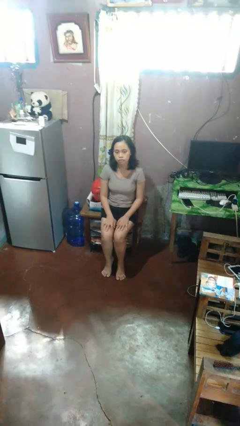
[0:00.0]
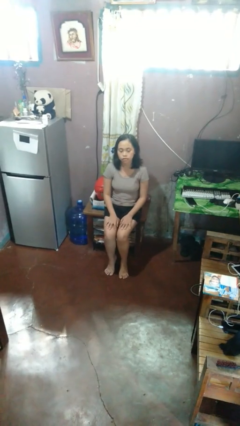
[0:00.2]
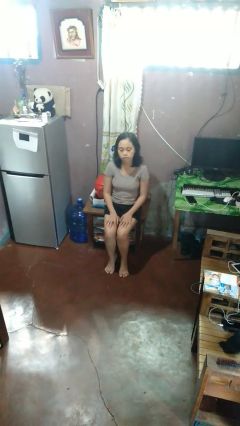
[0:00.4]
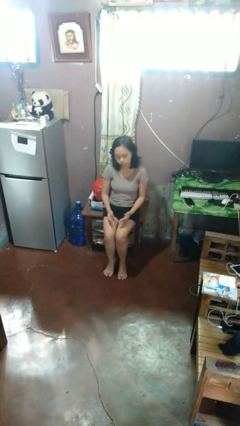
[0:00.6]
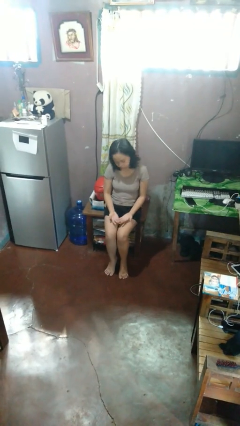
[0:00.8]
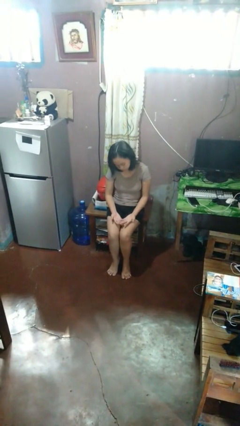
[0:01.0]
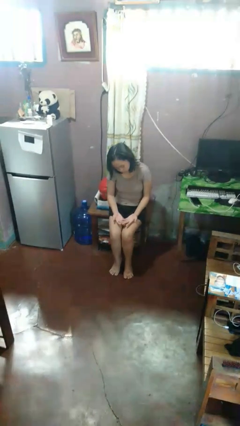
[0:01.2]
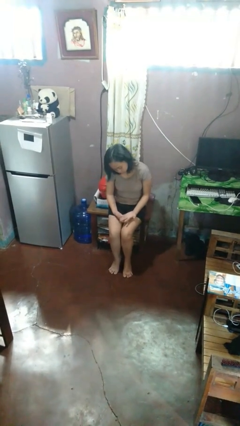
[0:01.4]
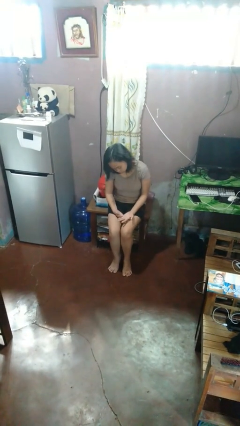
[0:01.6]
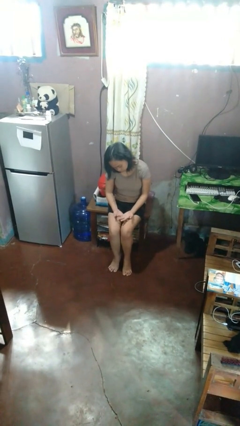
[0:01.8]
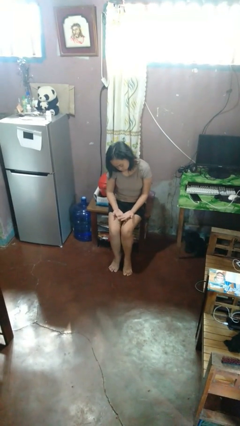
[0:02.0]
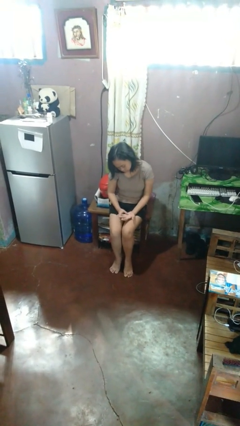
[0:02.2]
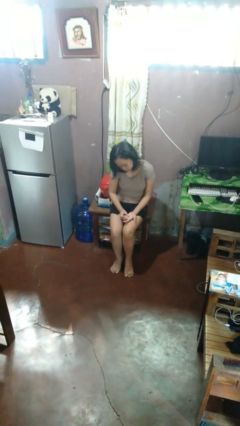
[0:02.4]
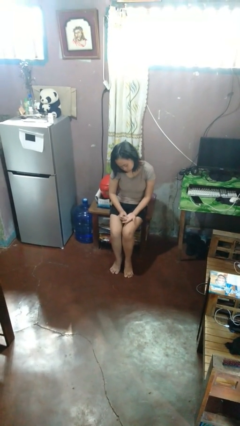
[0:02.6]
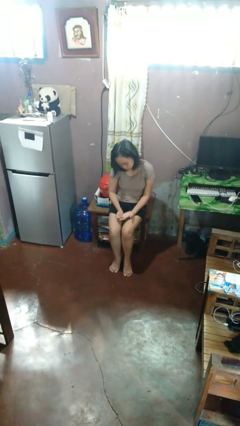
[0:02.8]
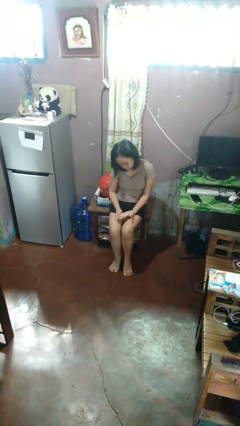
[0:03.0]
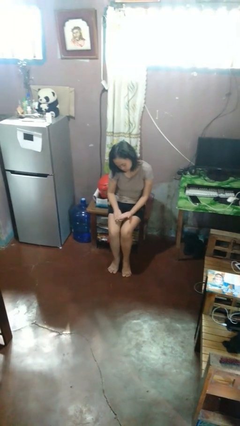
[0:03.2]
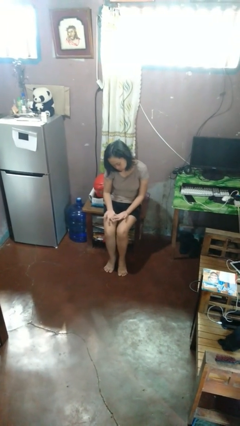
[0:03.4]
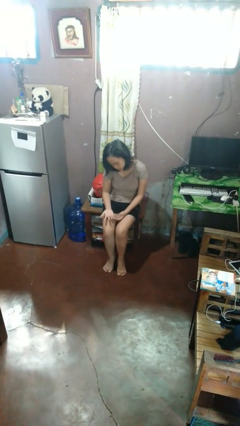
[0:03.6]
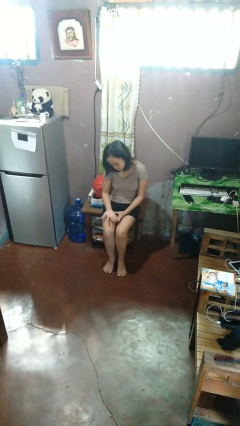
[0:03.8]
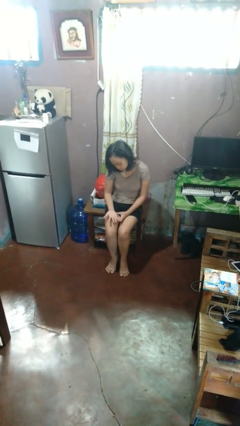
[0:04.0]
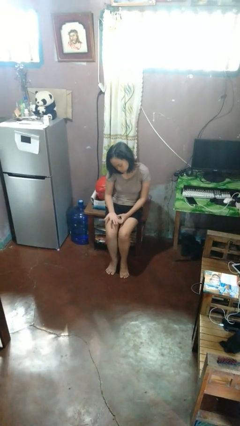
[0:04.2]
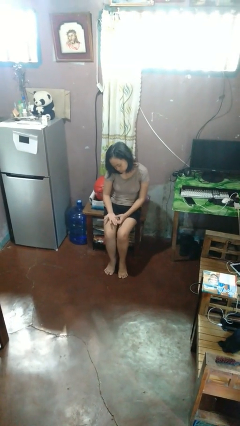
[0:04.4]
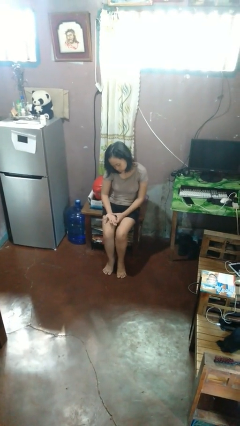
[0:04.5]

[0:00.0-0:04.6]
person looks at hands in lap

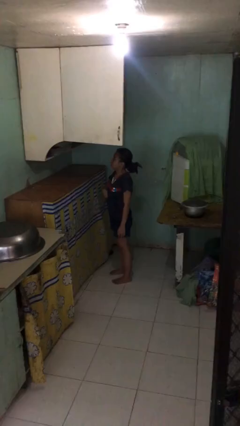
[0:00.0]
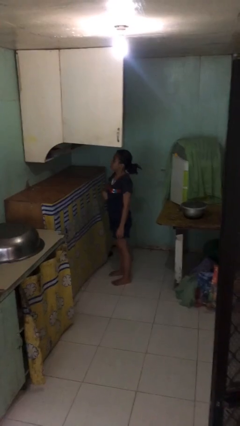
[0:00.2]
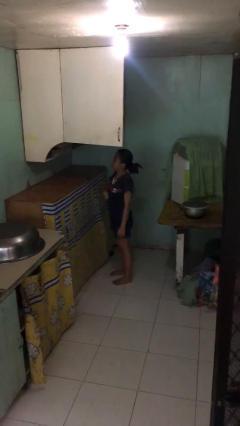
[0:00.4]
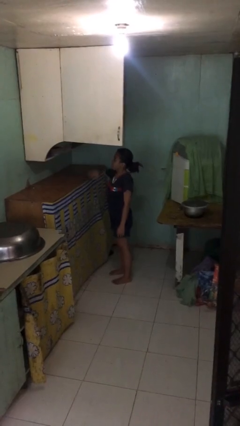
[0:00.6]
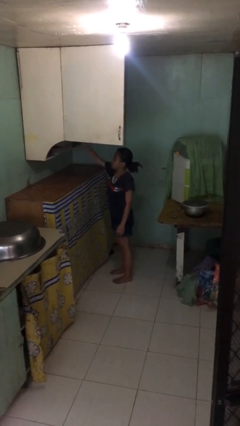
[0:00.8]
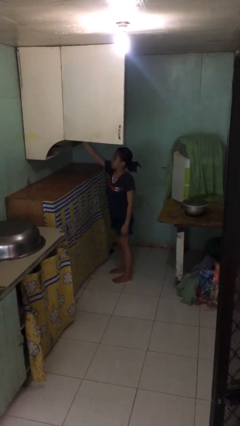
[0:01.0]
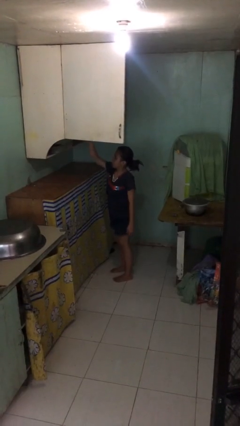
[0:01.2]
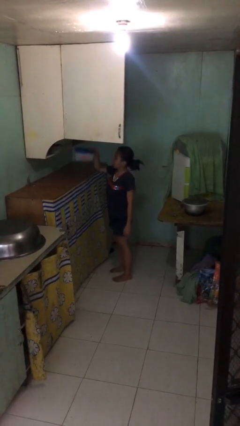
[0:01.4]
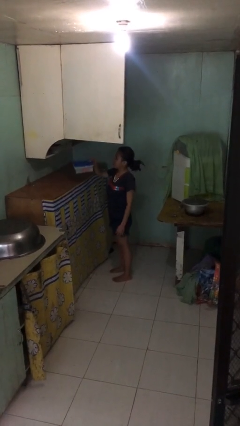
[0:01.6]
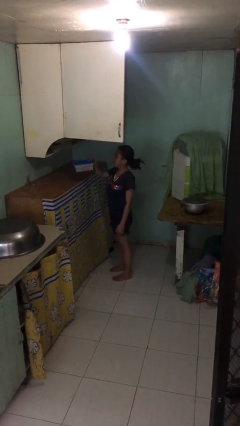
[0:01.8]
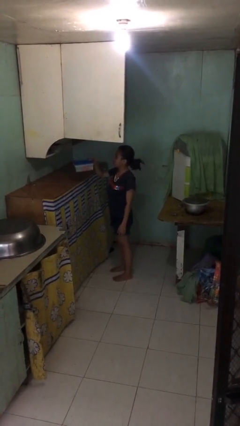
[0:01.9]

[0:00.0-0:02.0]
person picks up object from shelf

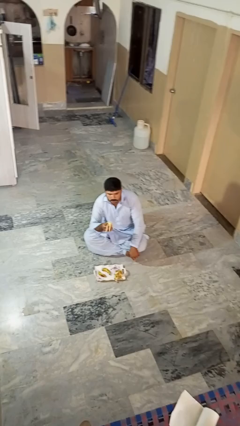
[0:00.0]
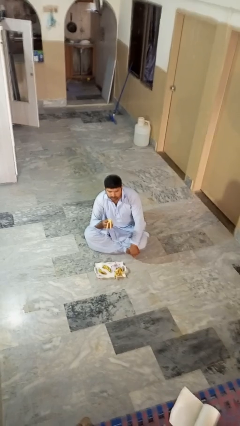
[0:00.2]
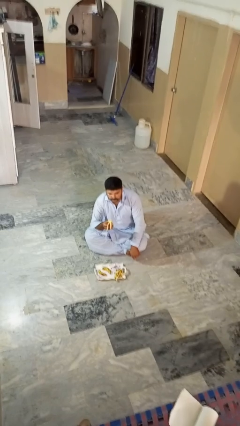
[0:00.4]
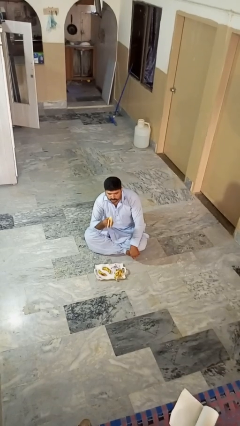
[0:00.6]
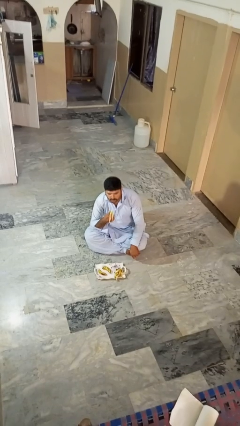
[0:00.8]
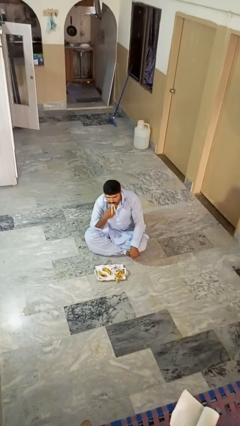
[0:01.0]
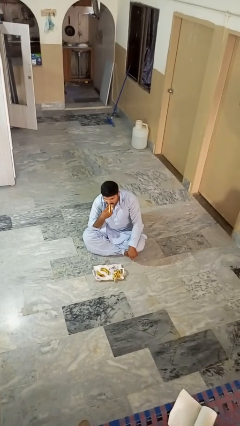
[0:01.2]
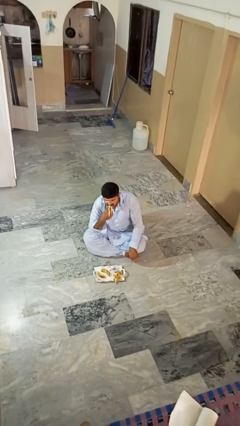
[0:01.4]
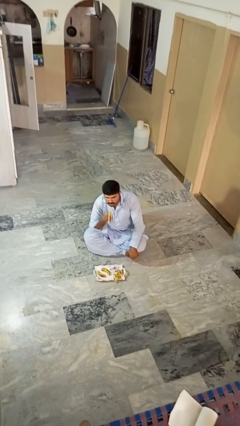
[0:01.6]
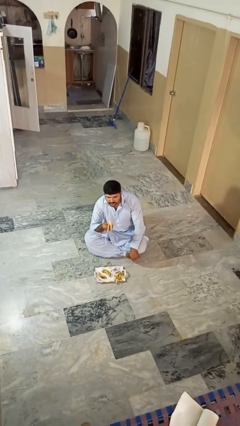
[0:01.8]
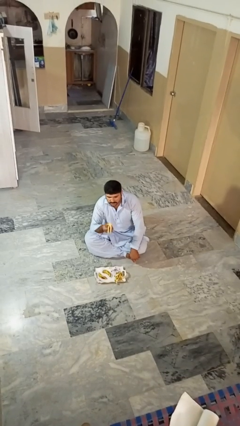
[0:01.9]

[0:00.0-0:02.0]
person eats banana

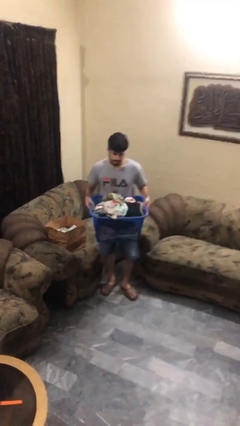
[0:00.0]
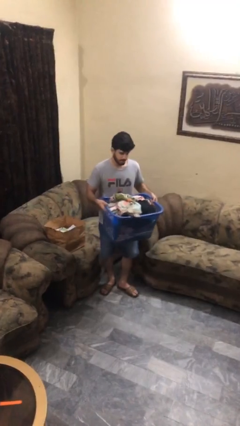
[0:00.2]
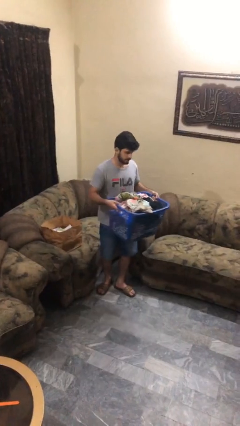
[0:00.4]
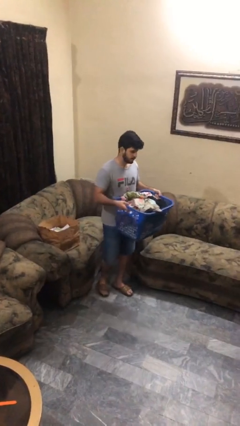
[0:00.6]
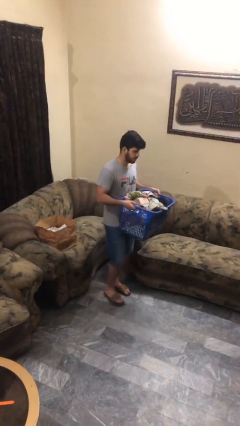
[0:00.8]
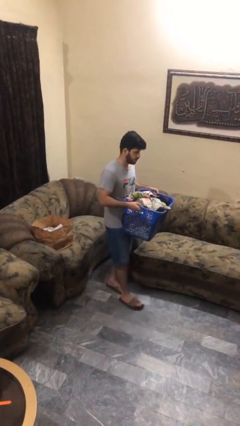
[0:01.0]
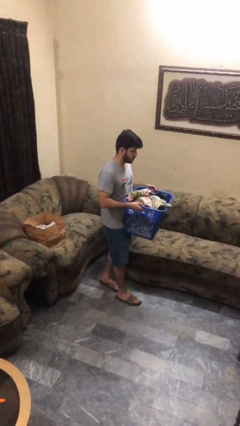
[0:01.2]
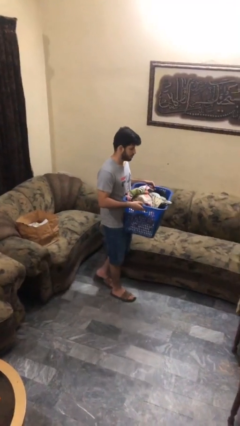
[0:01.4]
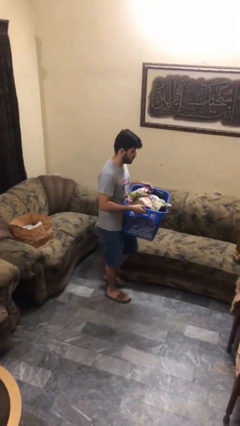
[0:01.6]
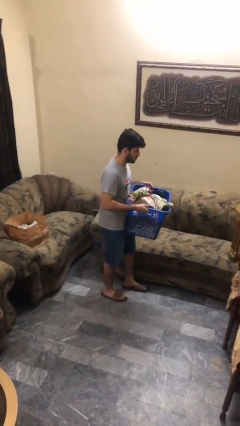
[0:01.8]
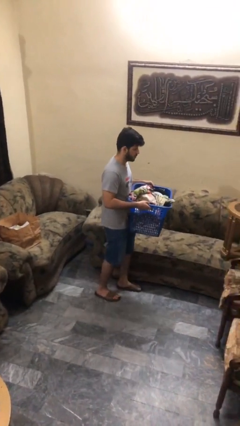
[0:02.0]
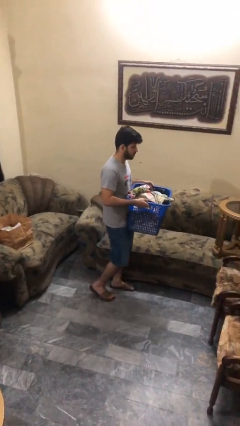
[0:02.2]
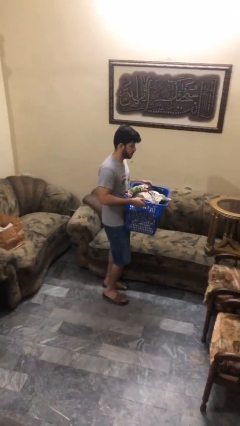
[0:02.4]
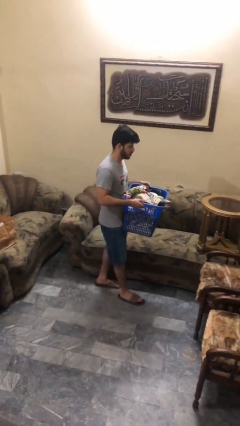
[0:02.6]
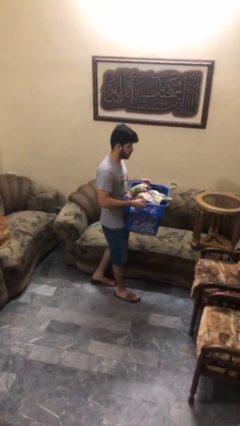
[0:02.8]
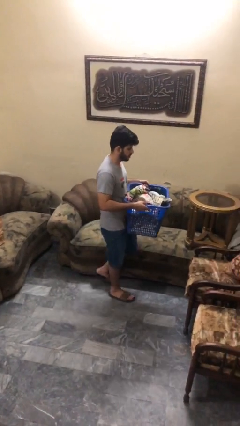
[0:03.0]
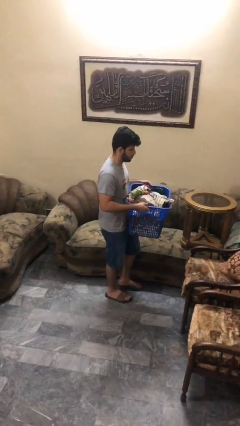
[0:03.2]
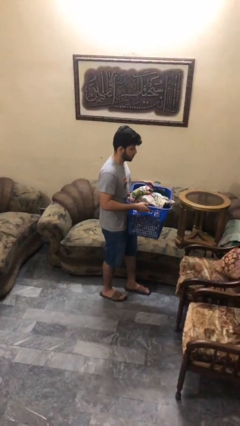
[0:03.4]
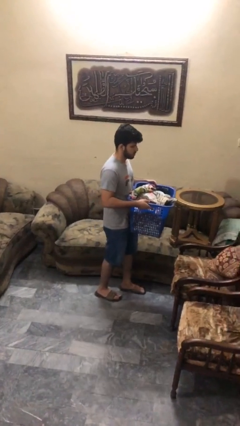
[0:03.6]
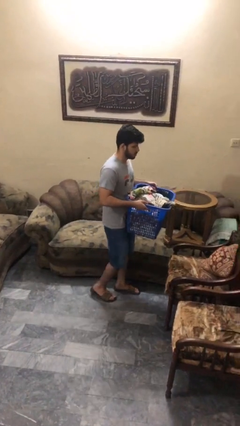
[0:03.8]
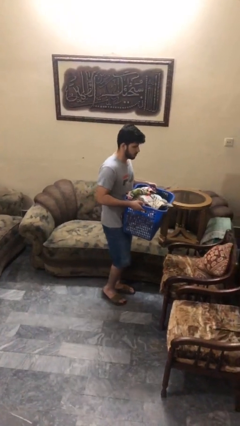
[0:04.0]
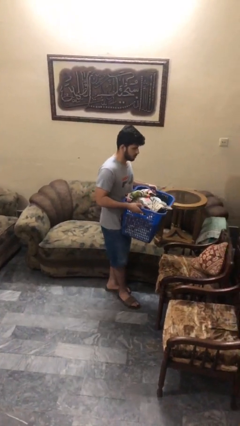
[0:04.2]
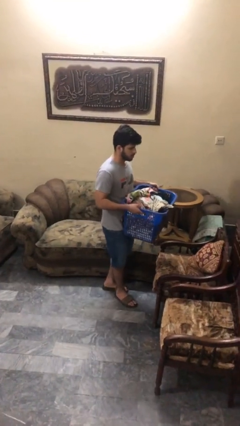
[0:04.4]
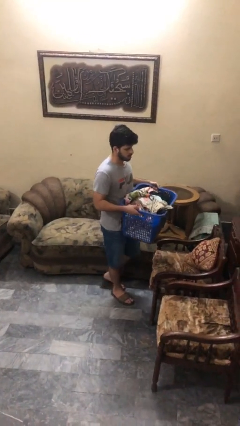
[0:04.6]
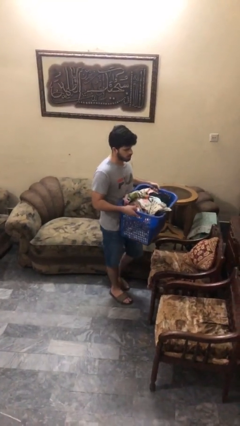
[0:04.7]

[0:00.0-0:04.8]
person carries laundry basket

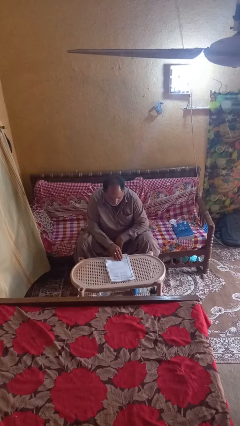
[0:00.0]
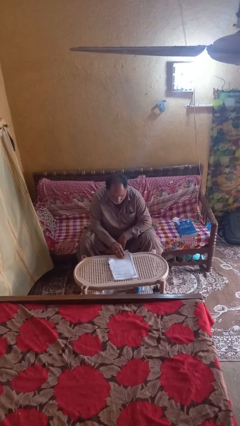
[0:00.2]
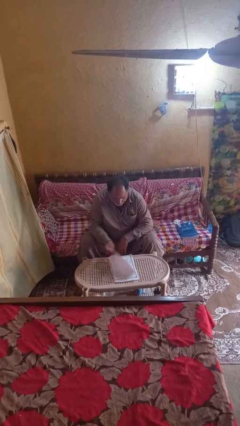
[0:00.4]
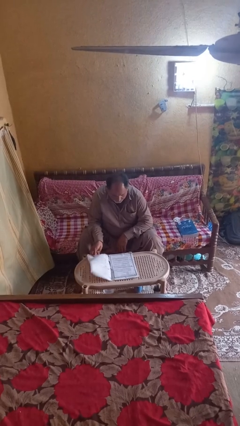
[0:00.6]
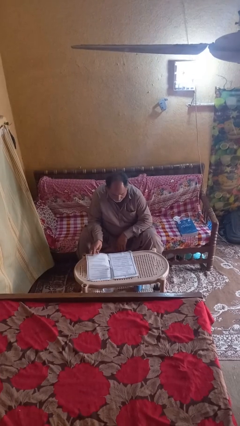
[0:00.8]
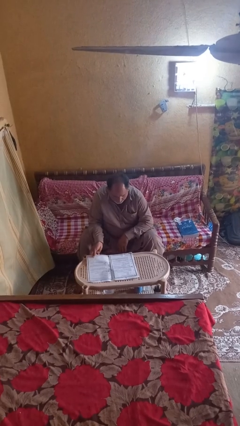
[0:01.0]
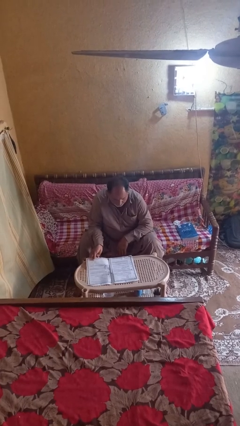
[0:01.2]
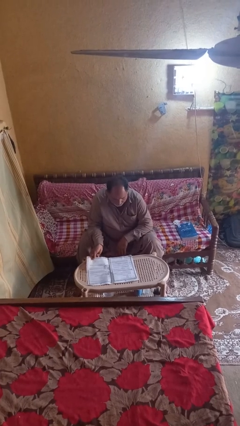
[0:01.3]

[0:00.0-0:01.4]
person reads newspaper

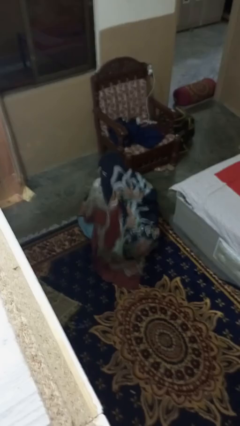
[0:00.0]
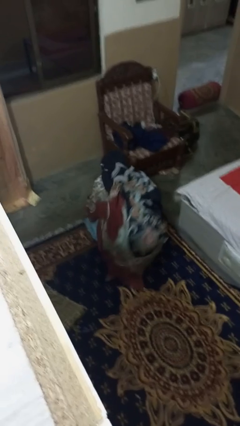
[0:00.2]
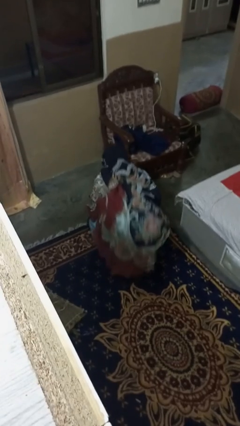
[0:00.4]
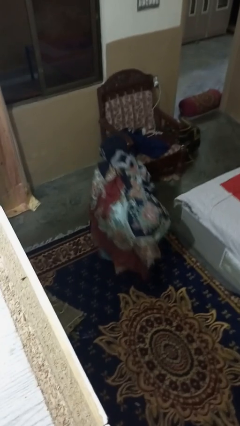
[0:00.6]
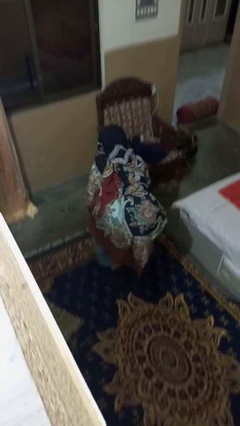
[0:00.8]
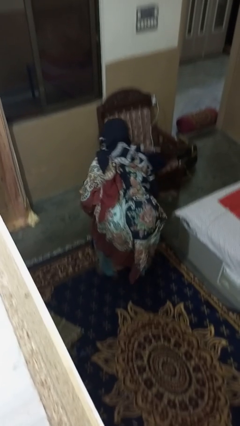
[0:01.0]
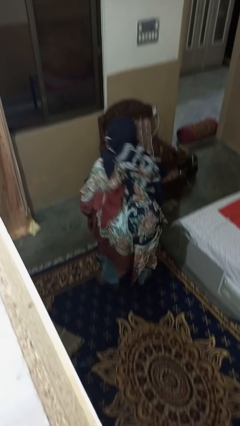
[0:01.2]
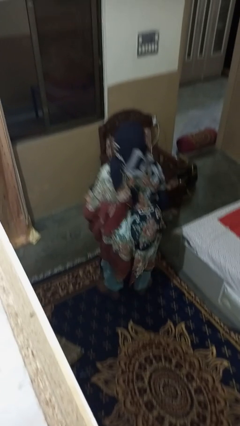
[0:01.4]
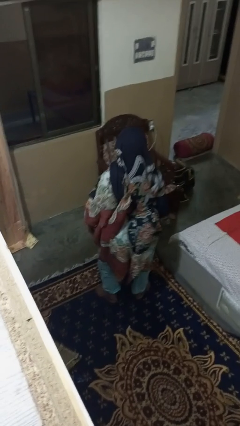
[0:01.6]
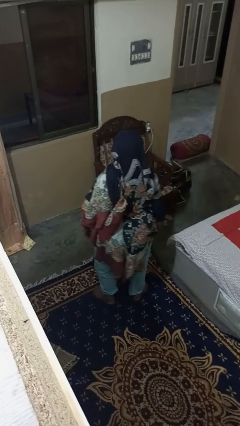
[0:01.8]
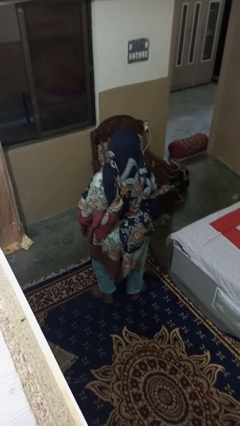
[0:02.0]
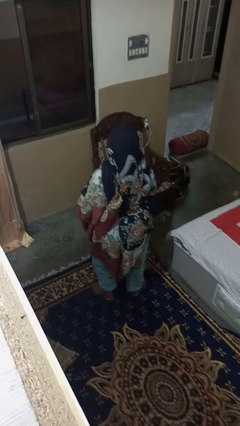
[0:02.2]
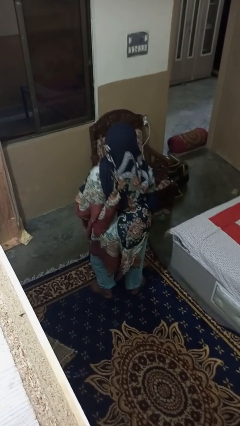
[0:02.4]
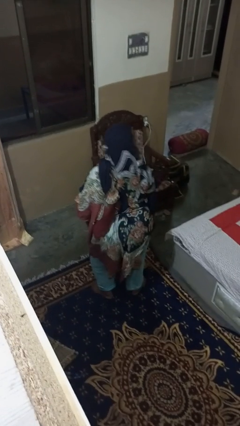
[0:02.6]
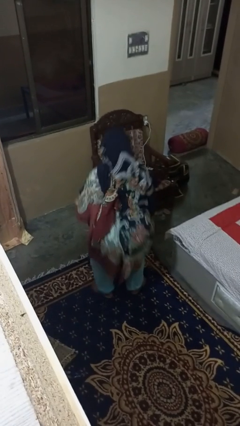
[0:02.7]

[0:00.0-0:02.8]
person stands up
